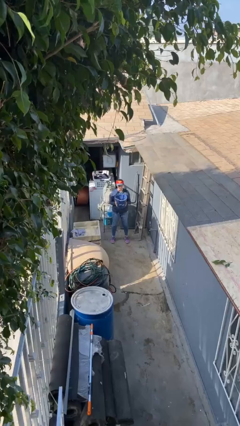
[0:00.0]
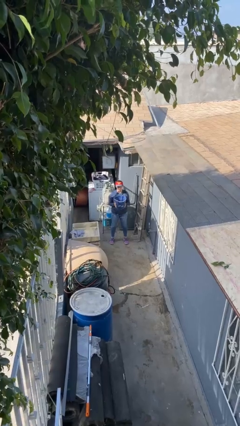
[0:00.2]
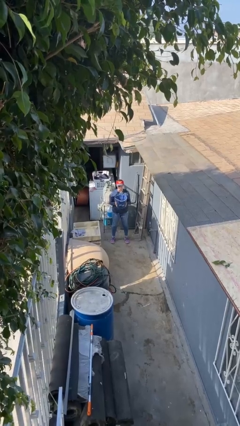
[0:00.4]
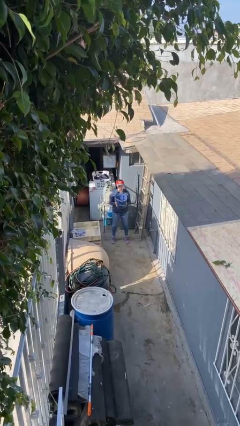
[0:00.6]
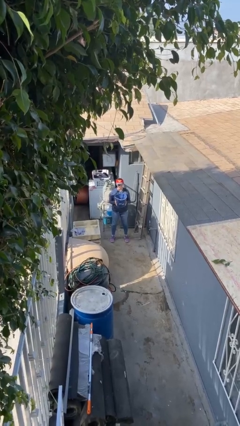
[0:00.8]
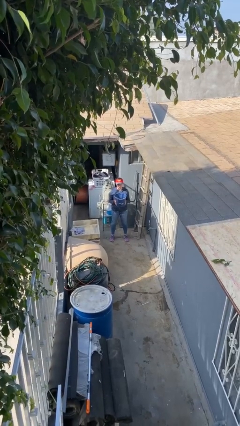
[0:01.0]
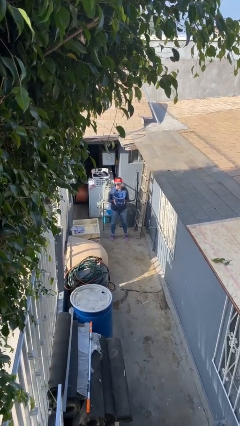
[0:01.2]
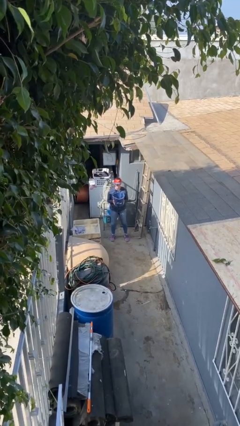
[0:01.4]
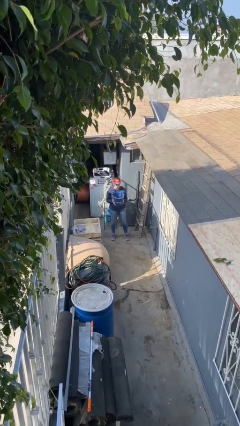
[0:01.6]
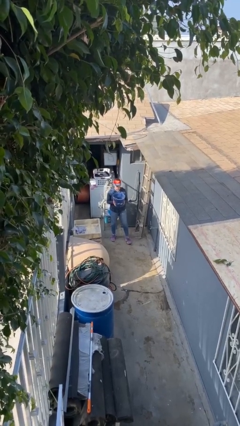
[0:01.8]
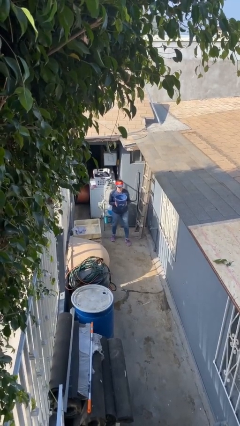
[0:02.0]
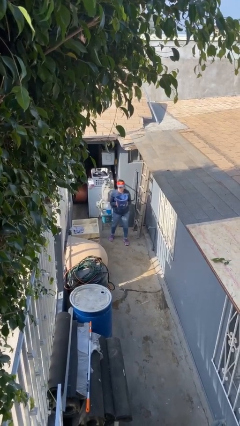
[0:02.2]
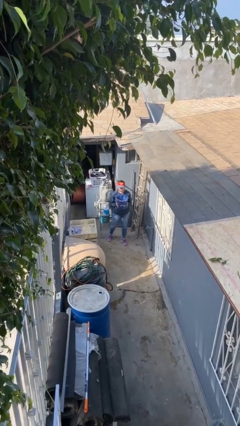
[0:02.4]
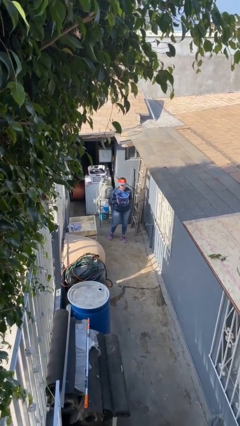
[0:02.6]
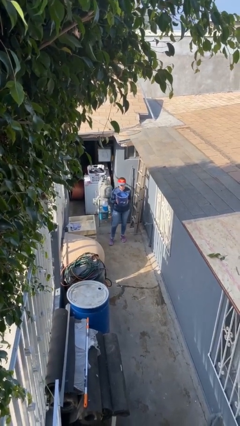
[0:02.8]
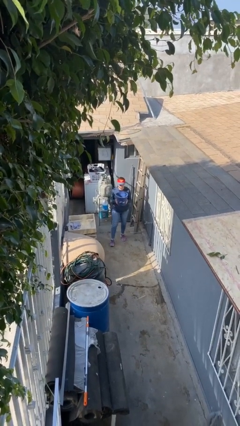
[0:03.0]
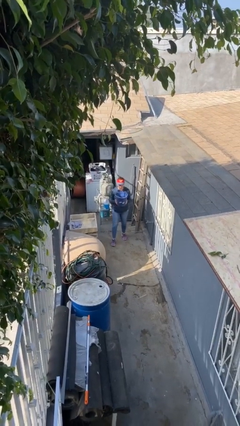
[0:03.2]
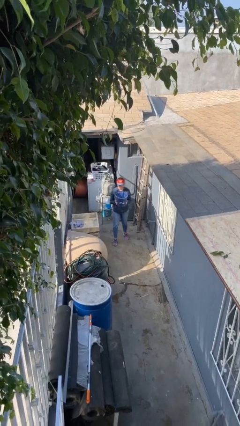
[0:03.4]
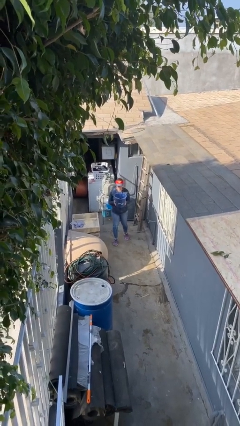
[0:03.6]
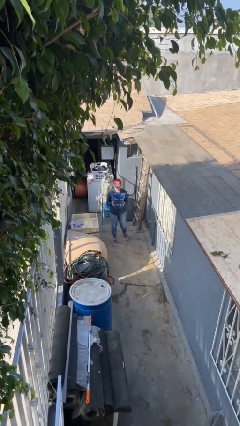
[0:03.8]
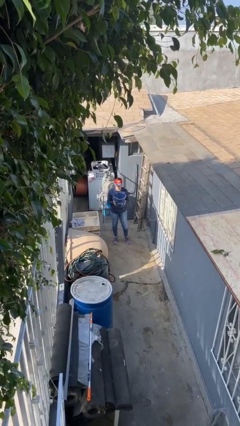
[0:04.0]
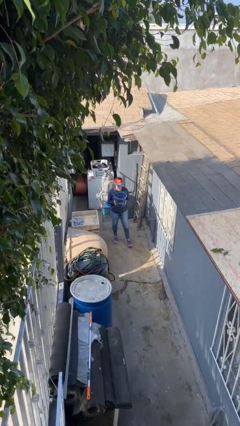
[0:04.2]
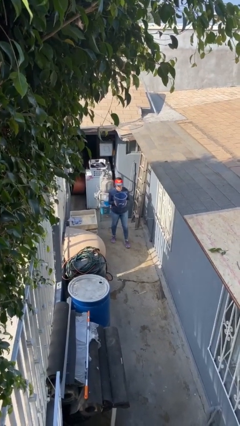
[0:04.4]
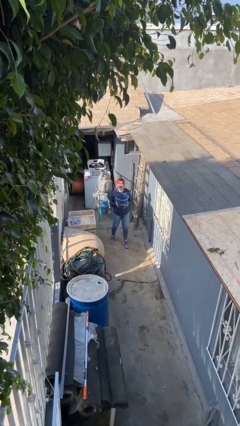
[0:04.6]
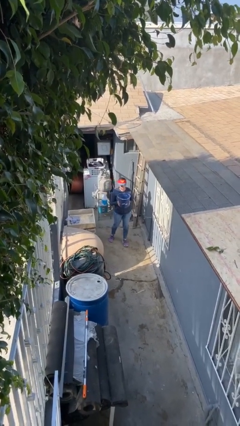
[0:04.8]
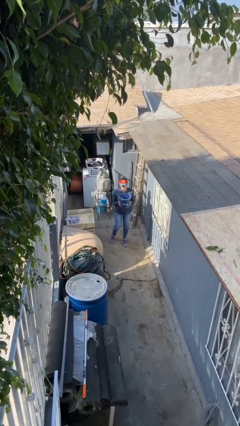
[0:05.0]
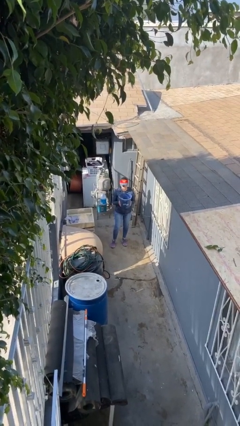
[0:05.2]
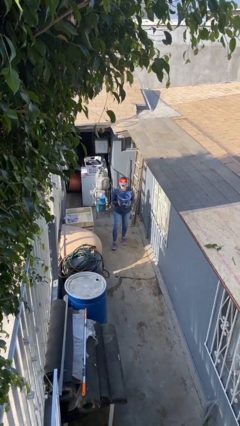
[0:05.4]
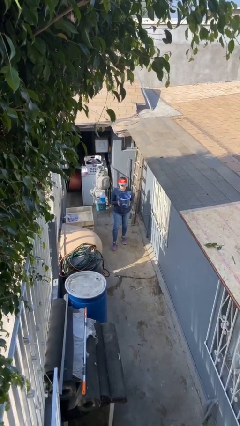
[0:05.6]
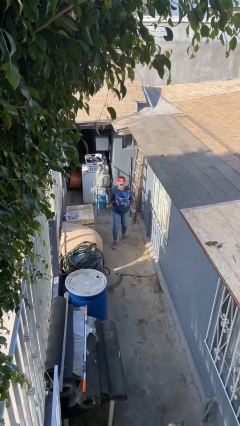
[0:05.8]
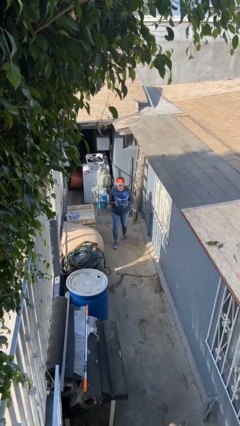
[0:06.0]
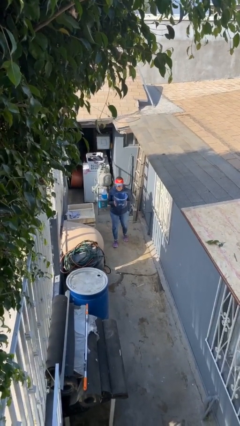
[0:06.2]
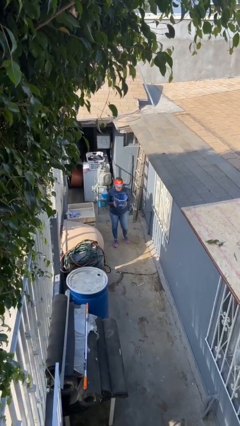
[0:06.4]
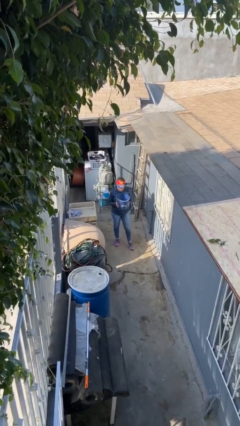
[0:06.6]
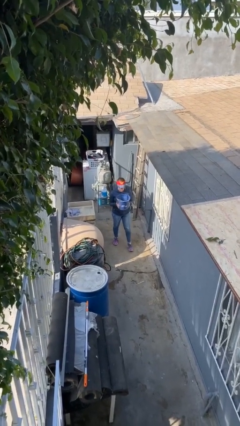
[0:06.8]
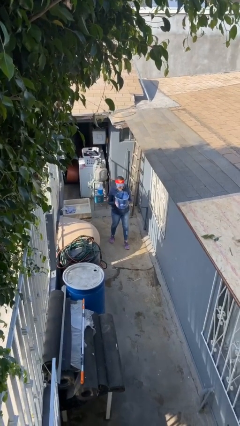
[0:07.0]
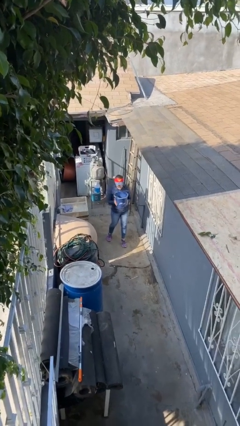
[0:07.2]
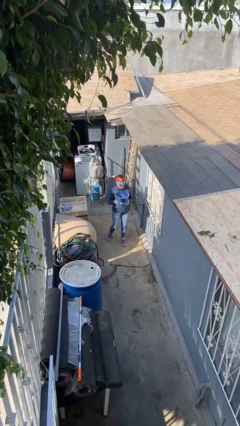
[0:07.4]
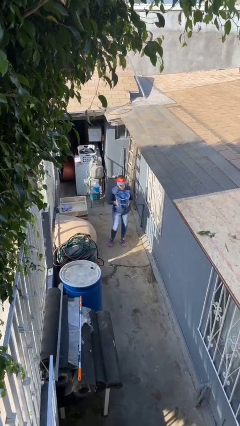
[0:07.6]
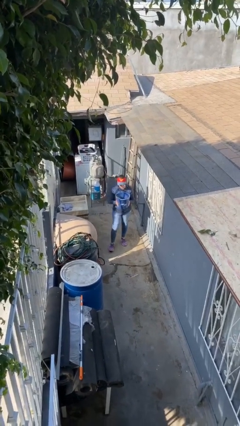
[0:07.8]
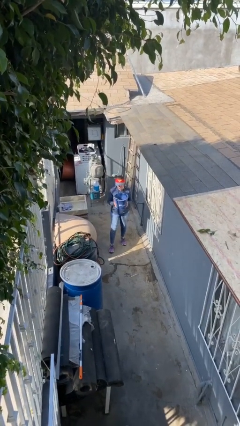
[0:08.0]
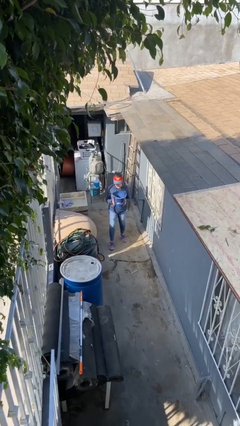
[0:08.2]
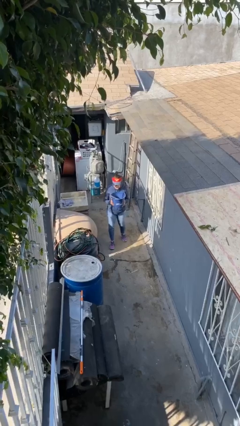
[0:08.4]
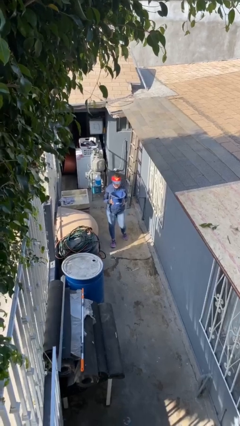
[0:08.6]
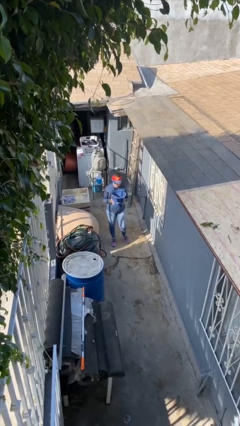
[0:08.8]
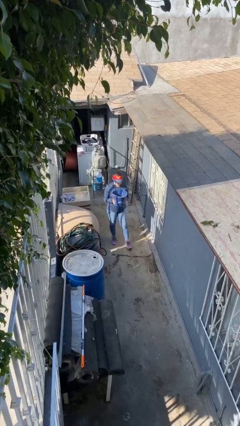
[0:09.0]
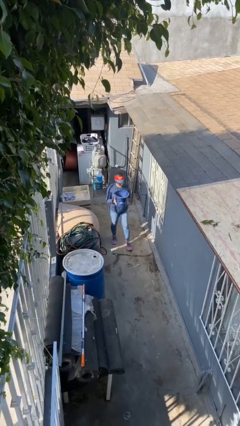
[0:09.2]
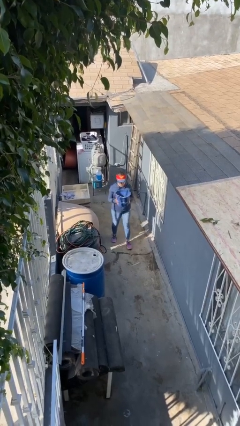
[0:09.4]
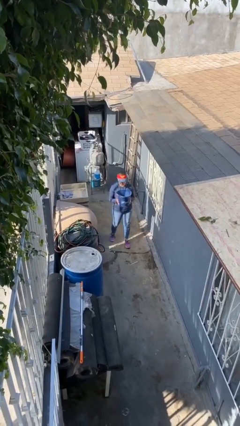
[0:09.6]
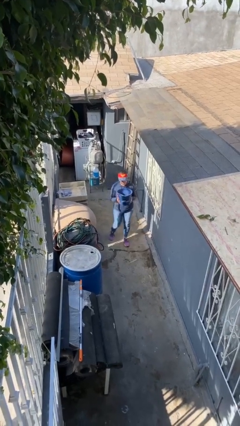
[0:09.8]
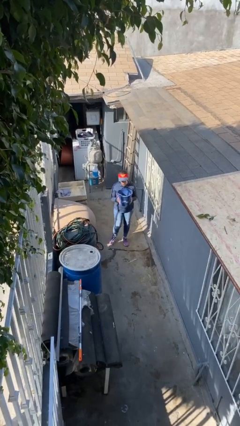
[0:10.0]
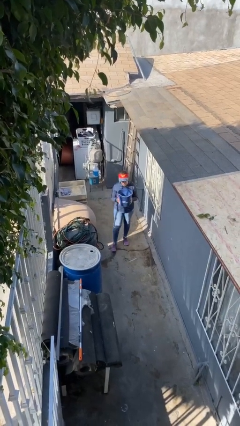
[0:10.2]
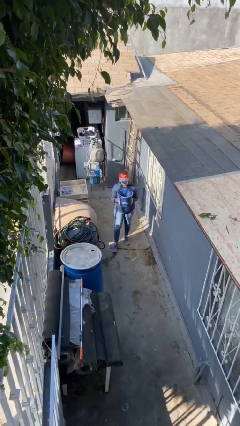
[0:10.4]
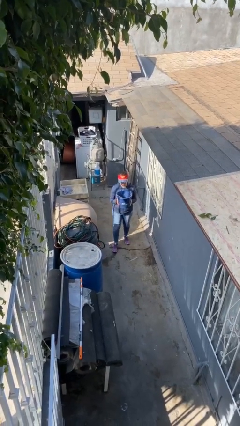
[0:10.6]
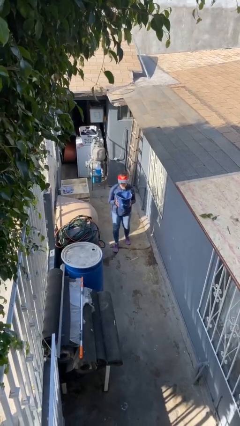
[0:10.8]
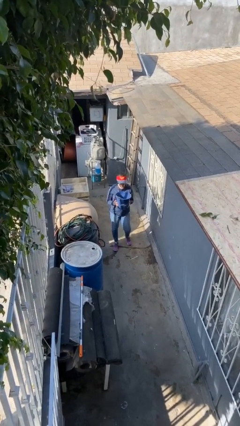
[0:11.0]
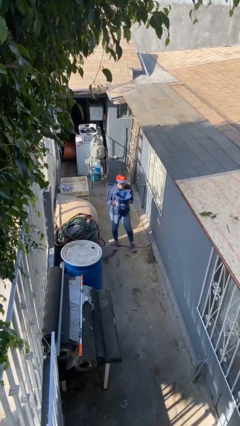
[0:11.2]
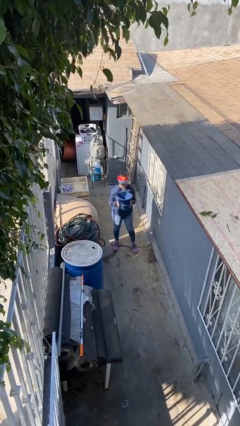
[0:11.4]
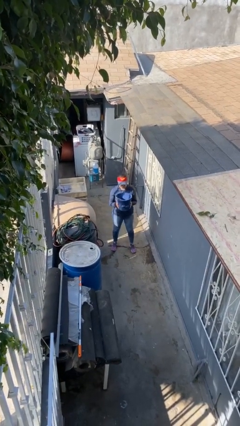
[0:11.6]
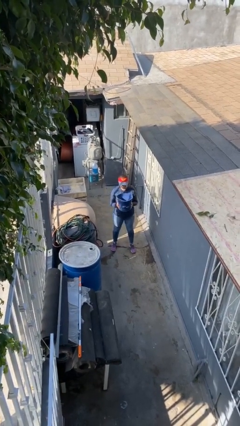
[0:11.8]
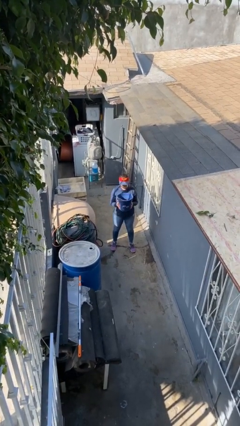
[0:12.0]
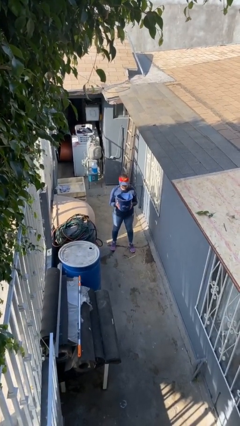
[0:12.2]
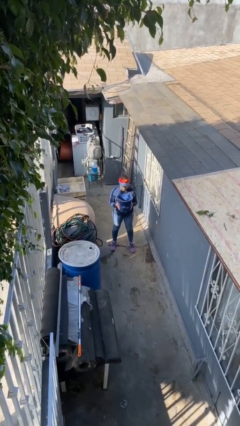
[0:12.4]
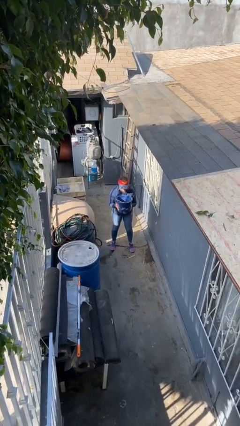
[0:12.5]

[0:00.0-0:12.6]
person carries heavy object

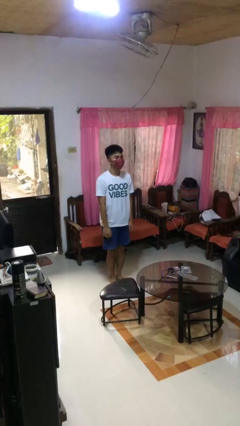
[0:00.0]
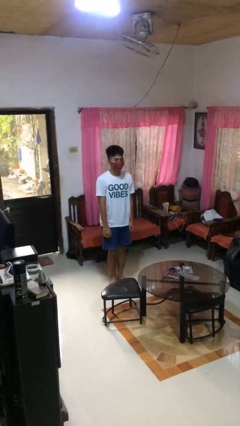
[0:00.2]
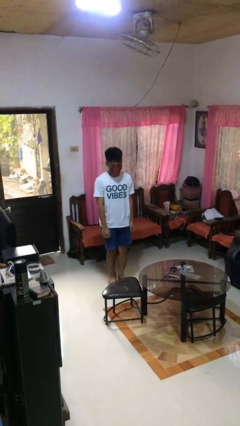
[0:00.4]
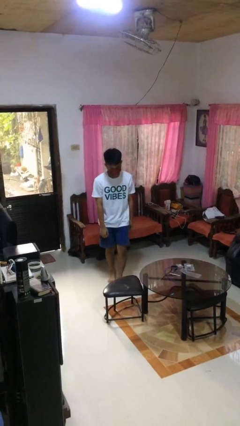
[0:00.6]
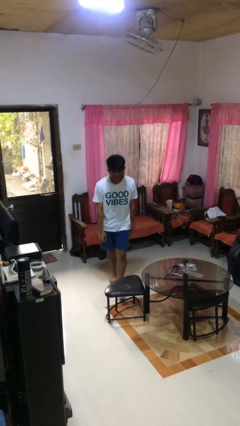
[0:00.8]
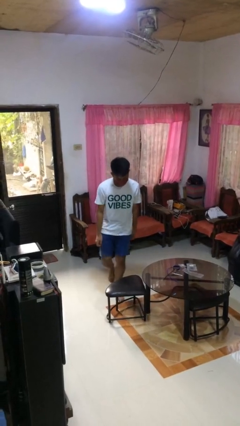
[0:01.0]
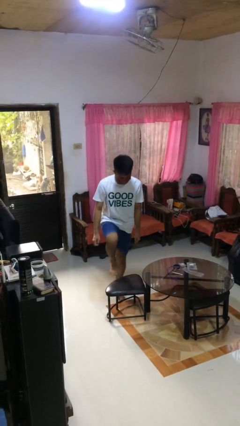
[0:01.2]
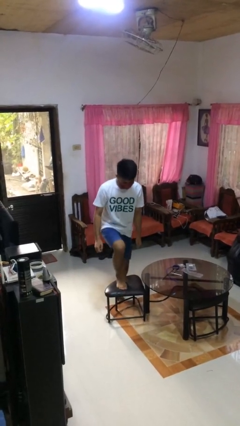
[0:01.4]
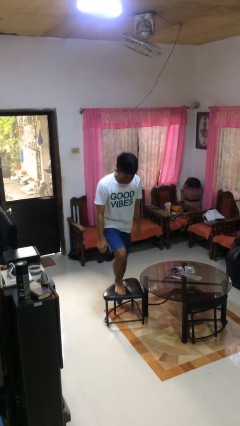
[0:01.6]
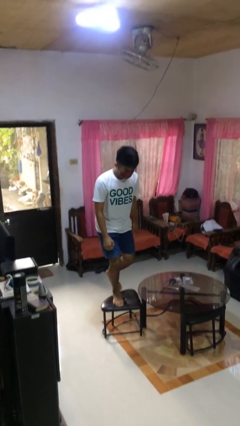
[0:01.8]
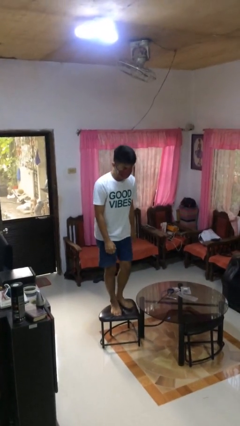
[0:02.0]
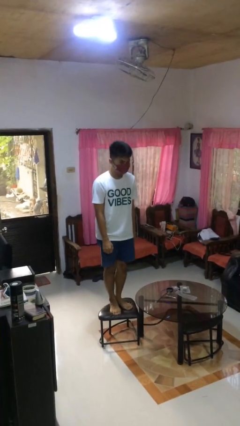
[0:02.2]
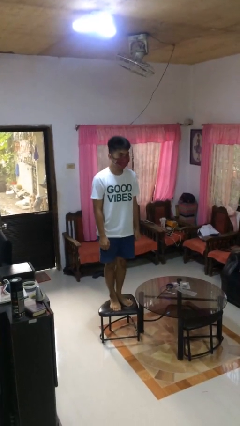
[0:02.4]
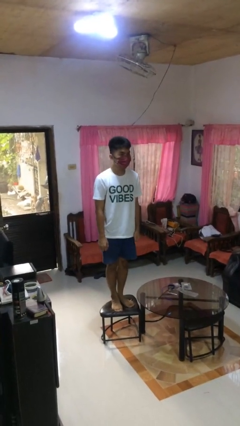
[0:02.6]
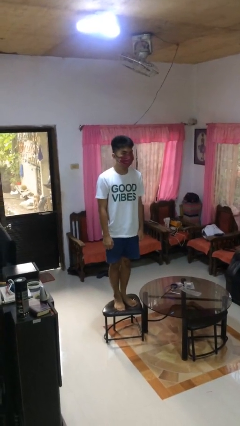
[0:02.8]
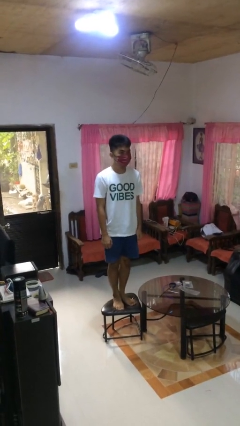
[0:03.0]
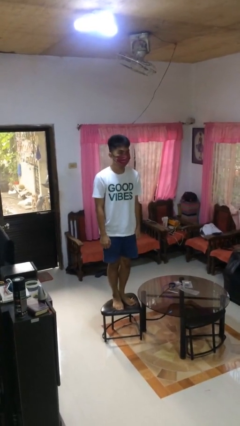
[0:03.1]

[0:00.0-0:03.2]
person climbs on chair

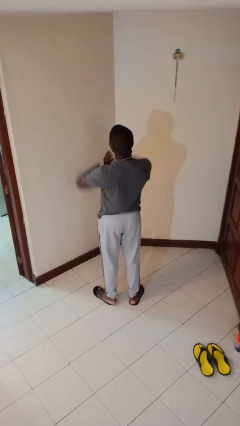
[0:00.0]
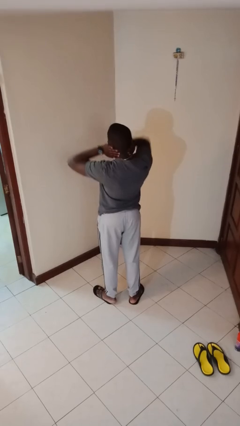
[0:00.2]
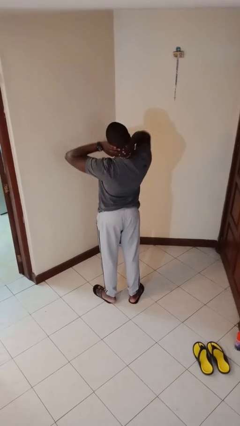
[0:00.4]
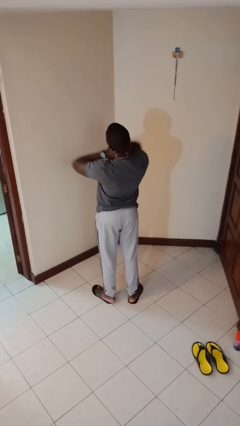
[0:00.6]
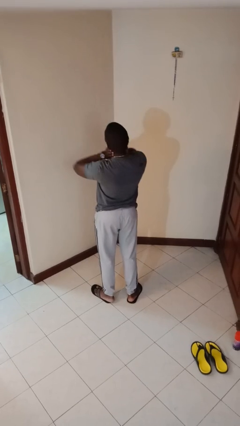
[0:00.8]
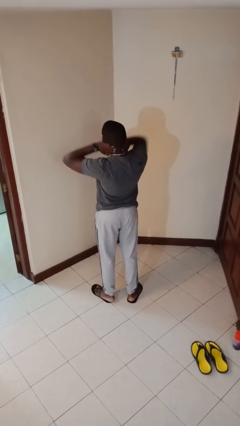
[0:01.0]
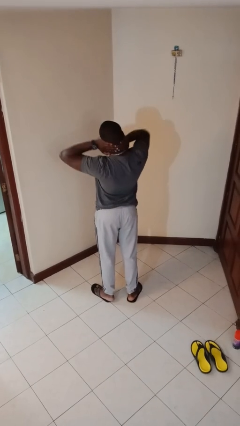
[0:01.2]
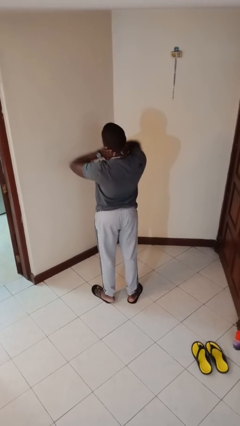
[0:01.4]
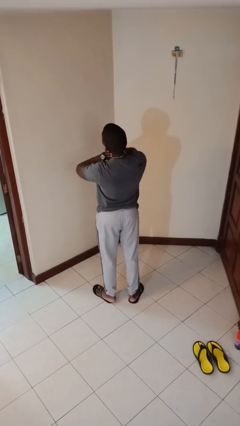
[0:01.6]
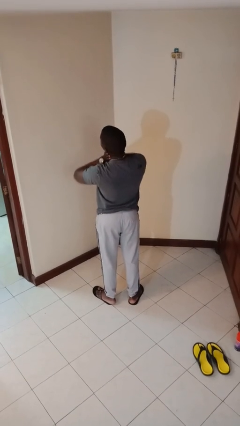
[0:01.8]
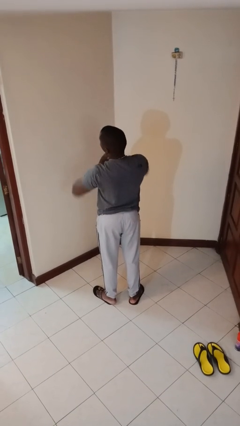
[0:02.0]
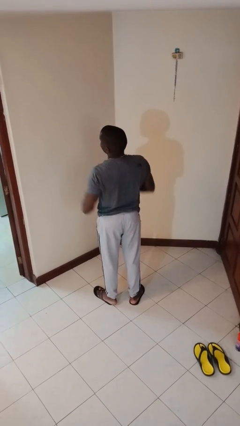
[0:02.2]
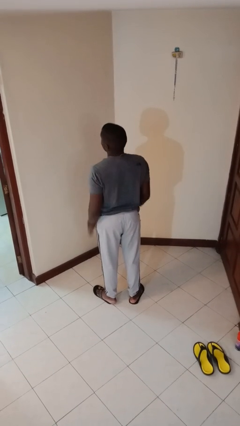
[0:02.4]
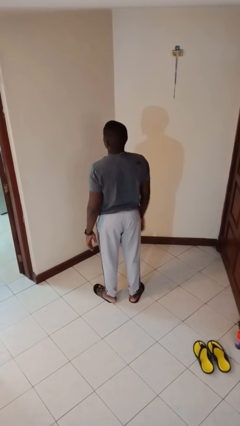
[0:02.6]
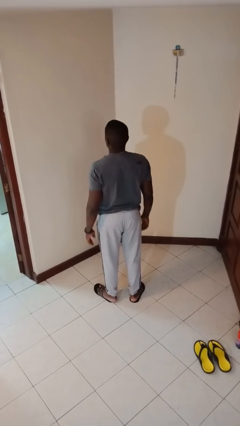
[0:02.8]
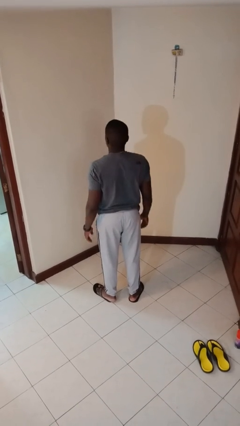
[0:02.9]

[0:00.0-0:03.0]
person rubs neck
